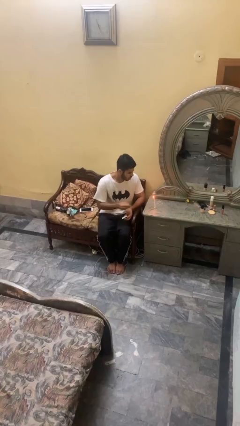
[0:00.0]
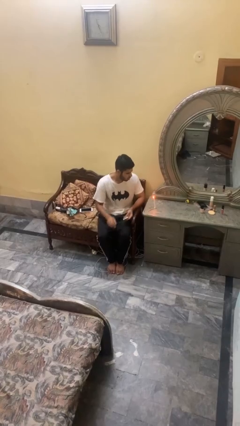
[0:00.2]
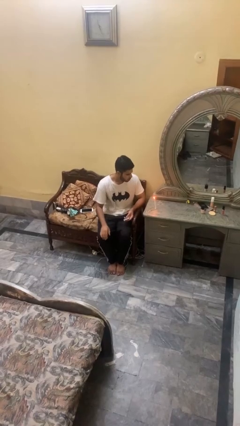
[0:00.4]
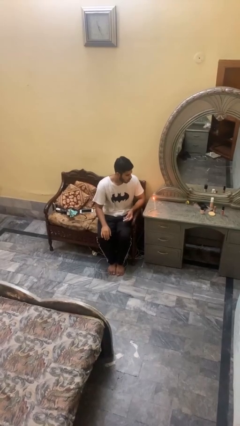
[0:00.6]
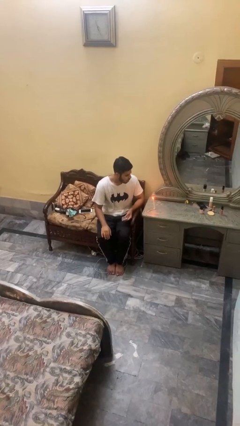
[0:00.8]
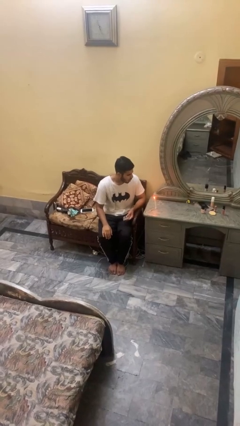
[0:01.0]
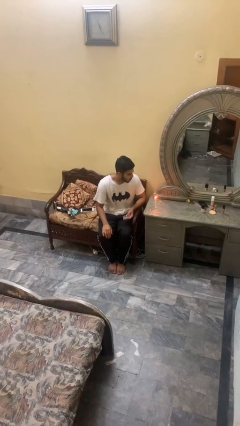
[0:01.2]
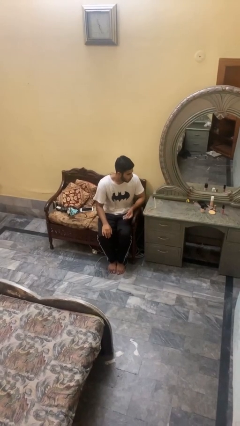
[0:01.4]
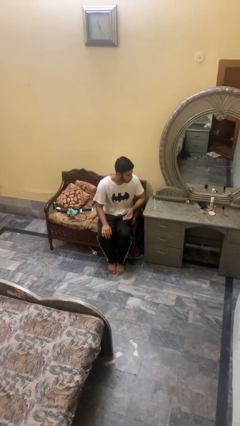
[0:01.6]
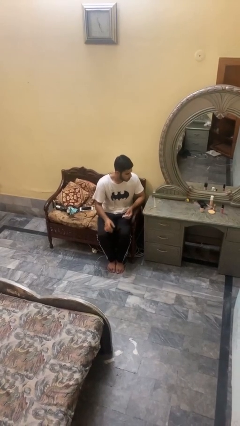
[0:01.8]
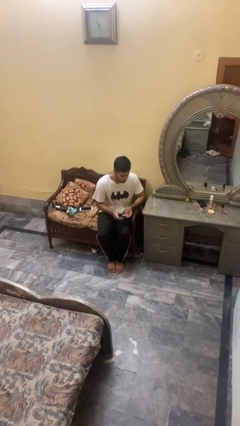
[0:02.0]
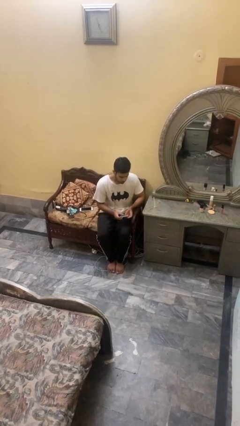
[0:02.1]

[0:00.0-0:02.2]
person extinguishes candle

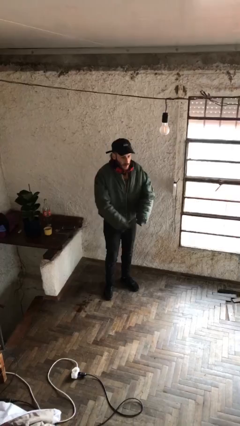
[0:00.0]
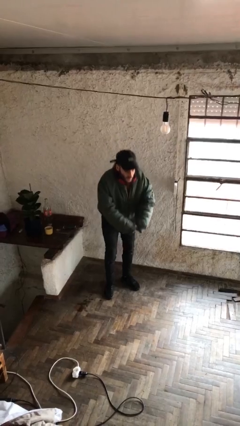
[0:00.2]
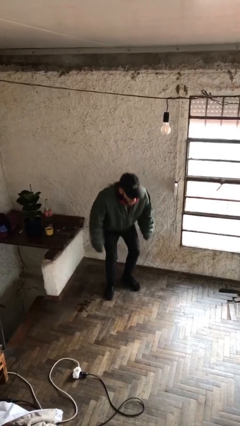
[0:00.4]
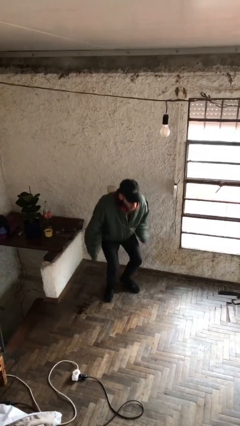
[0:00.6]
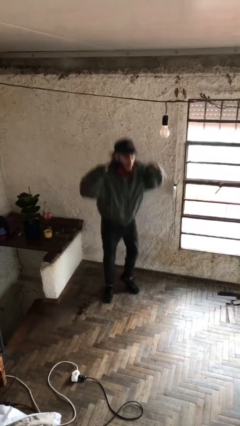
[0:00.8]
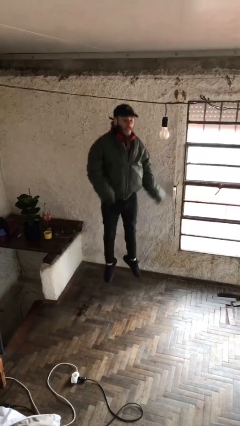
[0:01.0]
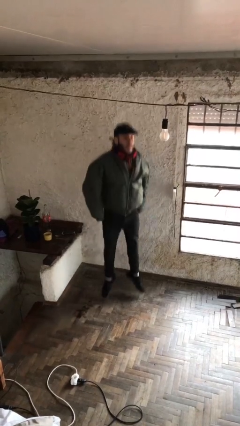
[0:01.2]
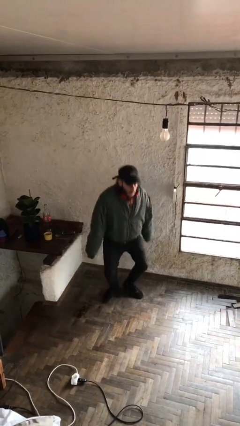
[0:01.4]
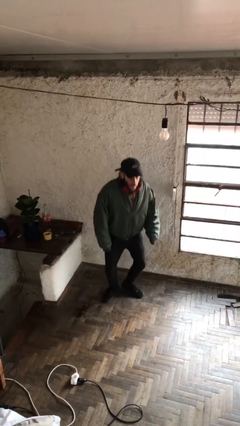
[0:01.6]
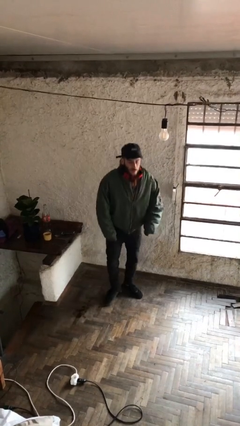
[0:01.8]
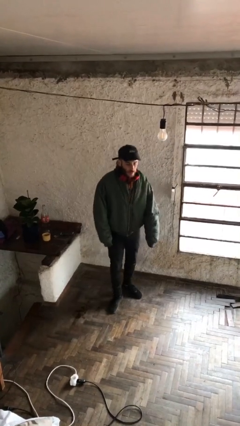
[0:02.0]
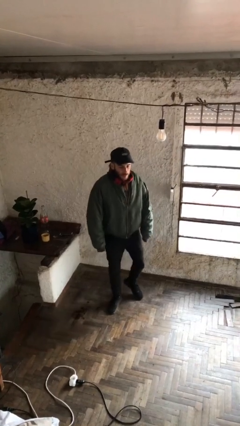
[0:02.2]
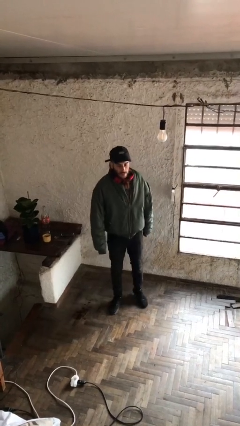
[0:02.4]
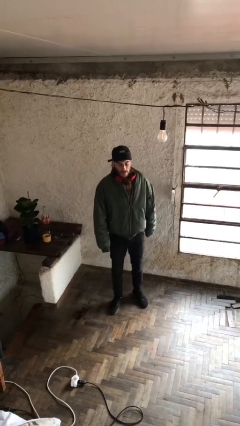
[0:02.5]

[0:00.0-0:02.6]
person jumps

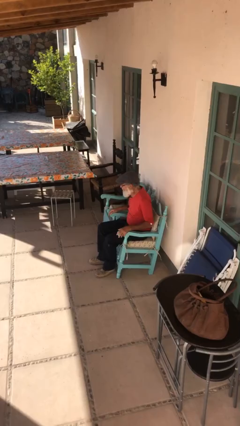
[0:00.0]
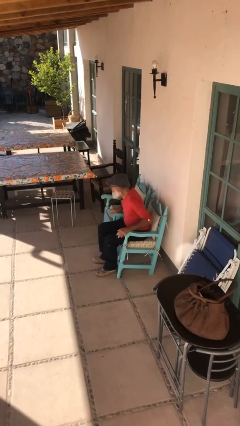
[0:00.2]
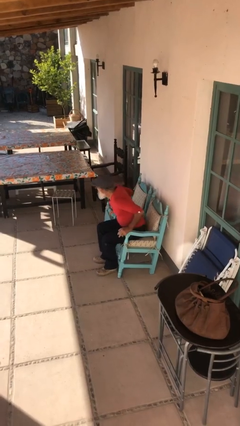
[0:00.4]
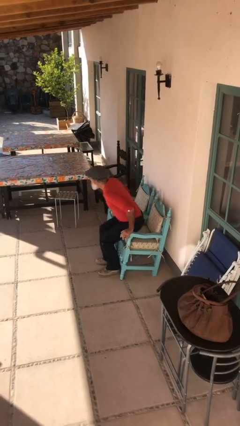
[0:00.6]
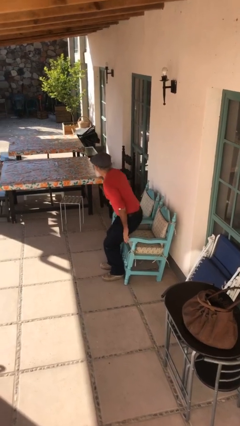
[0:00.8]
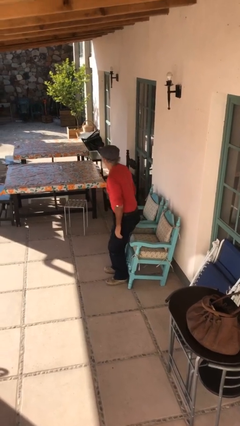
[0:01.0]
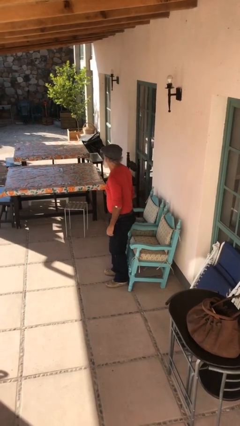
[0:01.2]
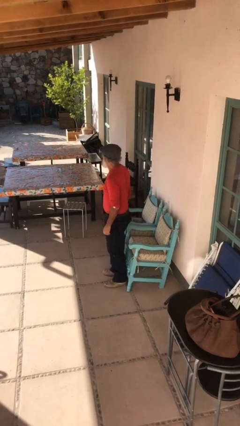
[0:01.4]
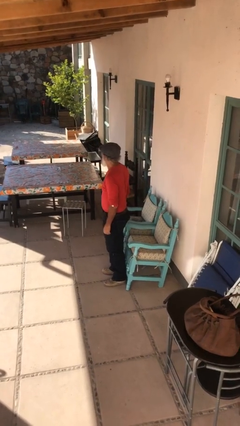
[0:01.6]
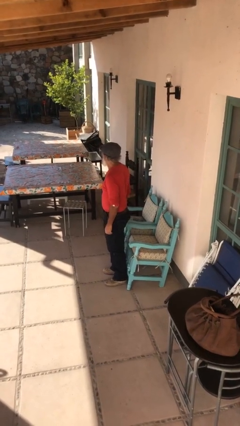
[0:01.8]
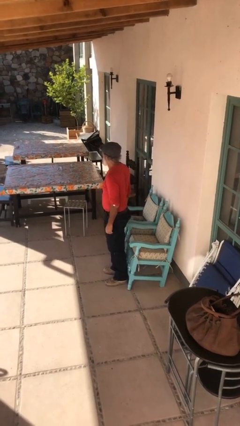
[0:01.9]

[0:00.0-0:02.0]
person stands up

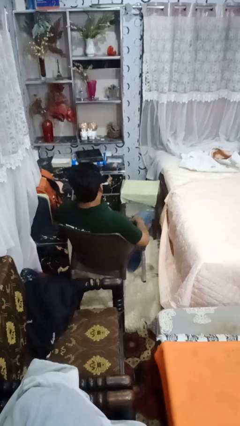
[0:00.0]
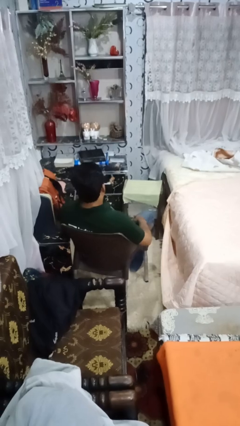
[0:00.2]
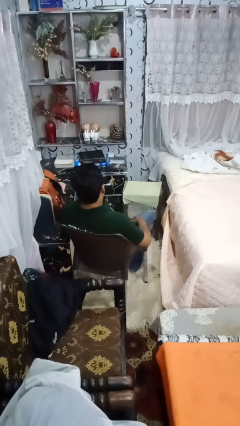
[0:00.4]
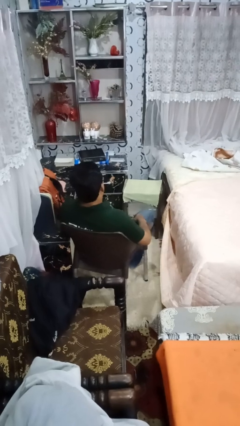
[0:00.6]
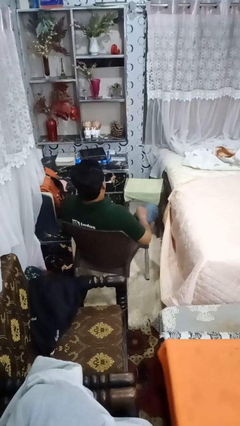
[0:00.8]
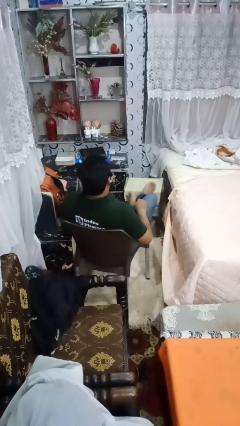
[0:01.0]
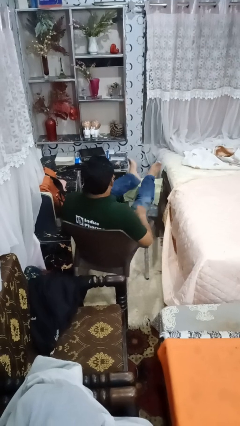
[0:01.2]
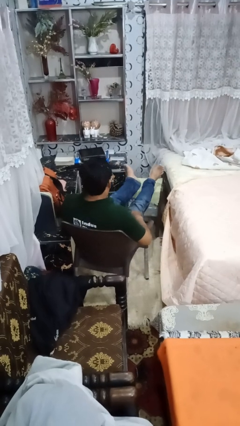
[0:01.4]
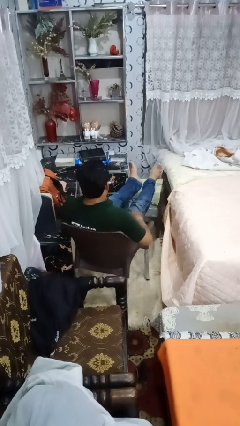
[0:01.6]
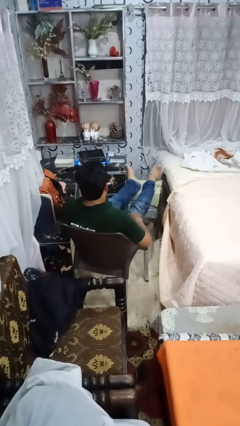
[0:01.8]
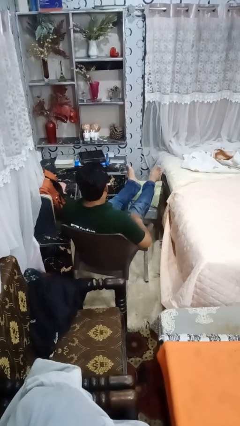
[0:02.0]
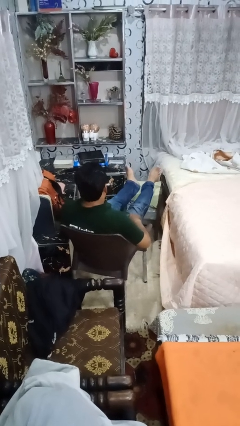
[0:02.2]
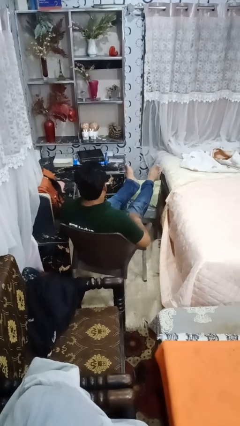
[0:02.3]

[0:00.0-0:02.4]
person puts feet up

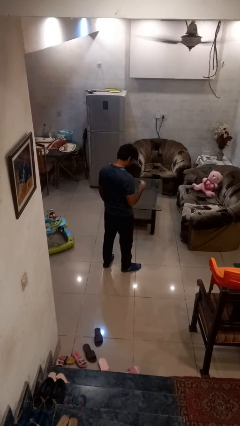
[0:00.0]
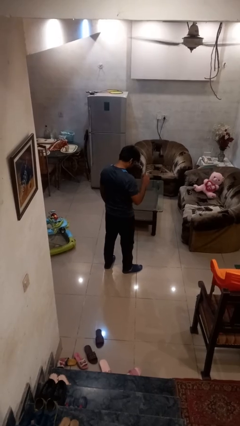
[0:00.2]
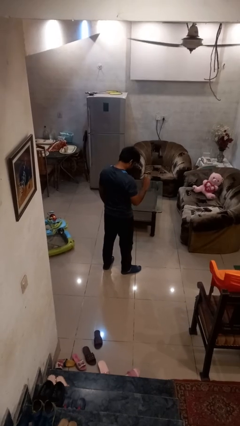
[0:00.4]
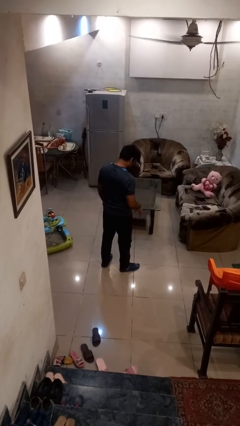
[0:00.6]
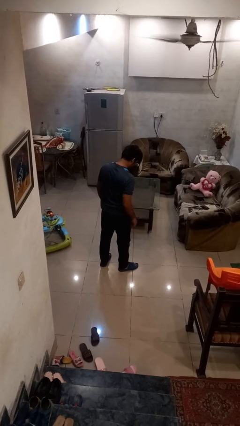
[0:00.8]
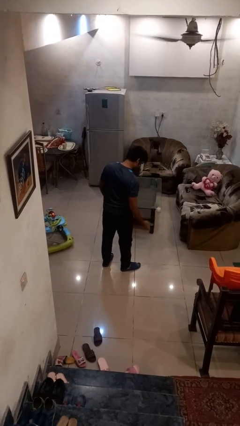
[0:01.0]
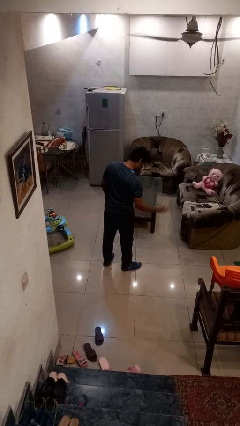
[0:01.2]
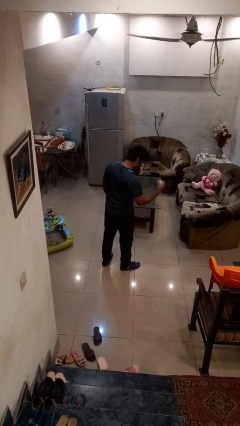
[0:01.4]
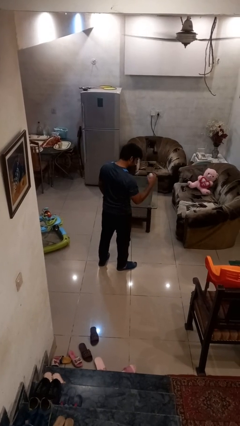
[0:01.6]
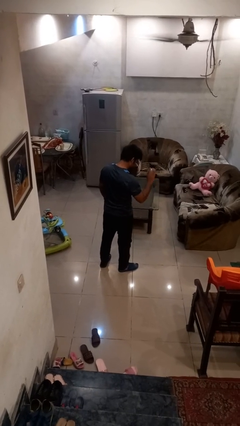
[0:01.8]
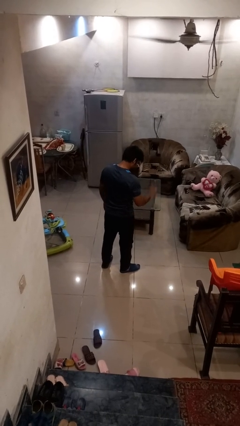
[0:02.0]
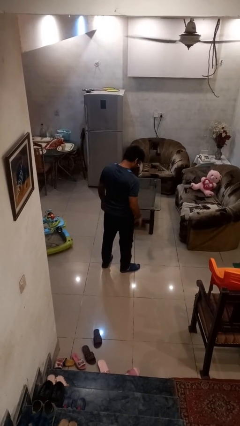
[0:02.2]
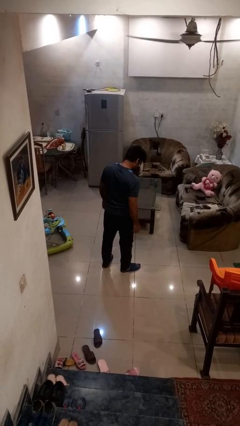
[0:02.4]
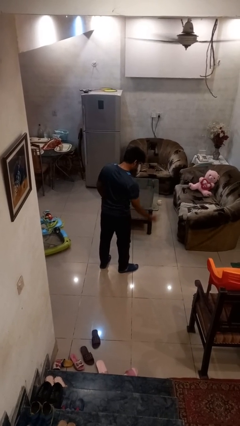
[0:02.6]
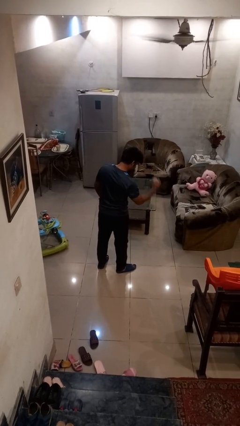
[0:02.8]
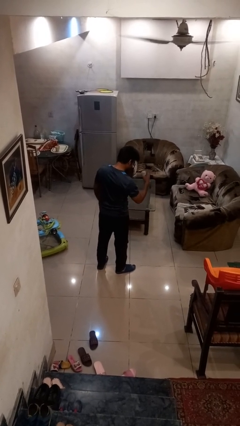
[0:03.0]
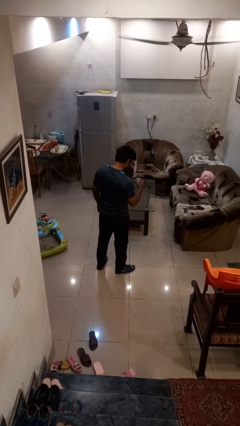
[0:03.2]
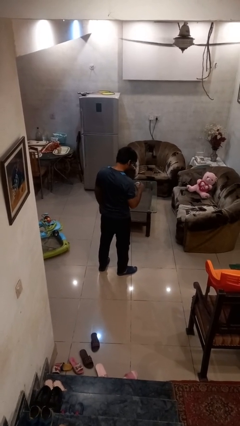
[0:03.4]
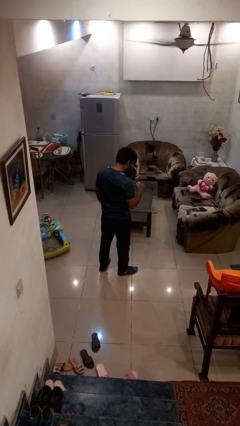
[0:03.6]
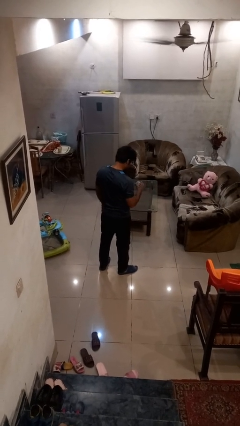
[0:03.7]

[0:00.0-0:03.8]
person bounces ball on floor

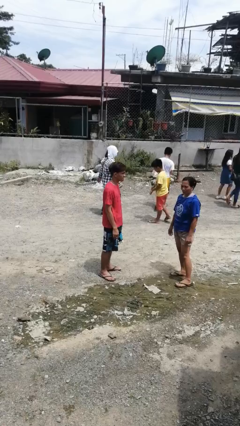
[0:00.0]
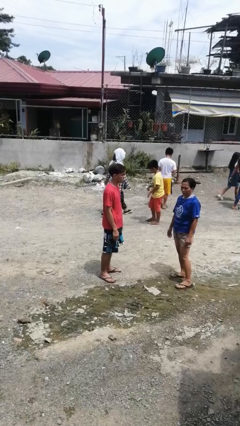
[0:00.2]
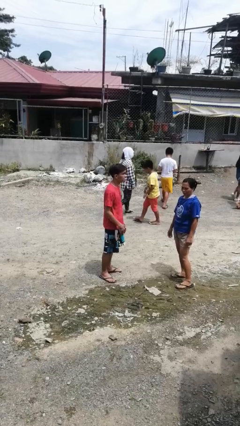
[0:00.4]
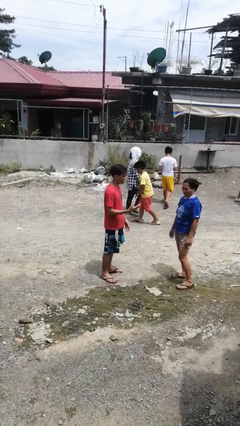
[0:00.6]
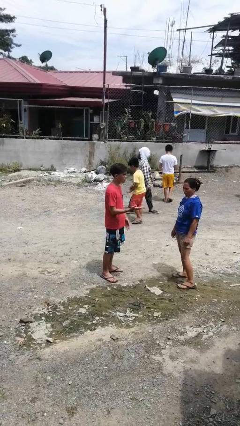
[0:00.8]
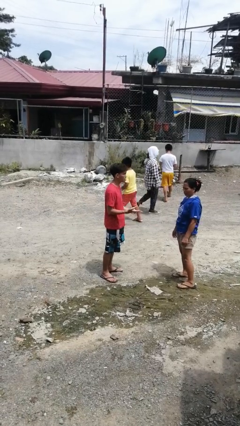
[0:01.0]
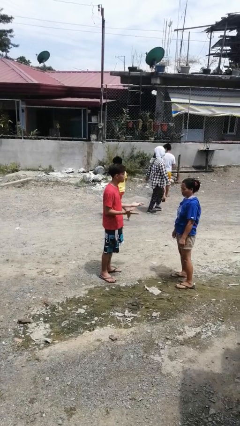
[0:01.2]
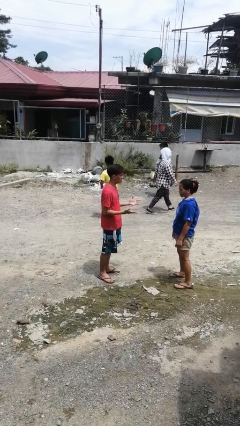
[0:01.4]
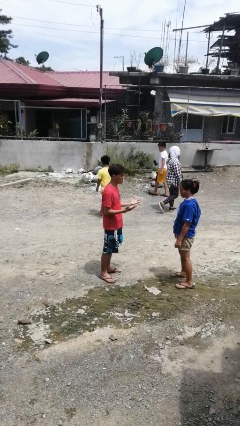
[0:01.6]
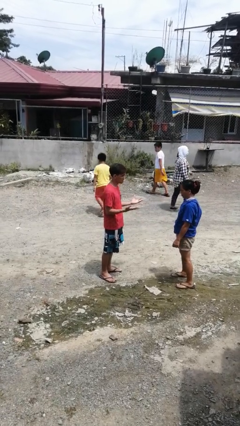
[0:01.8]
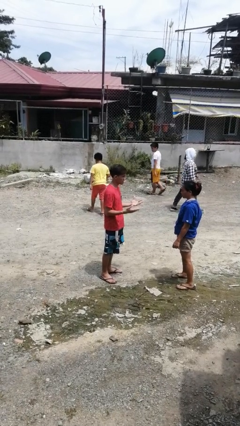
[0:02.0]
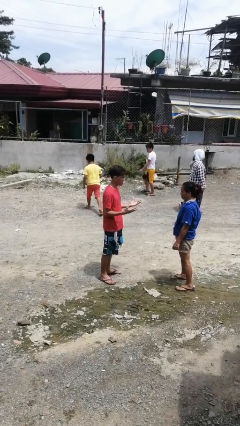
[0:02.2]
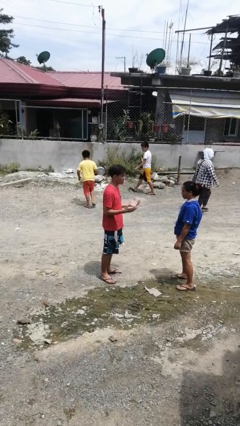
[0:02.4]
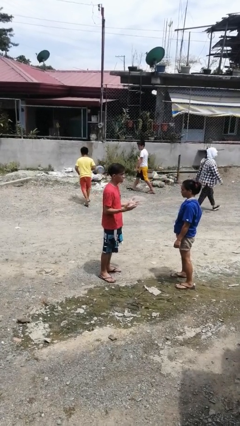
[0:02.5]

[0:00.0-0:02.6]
person talks to person

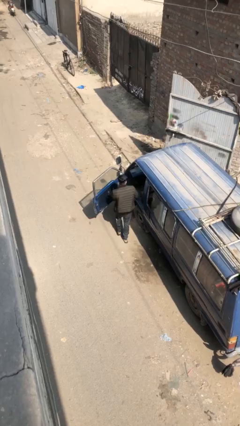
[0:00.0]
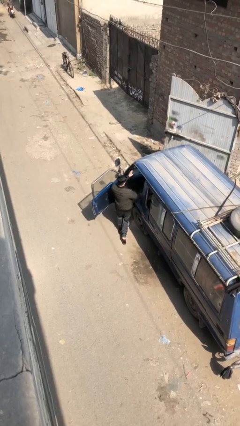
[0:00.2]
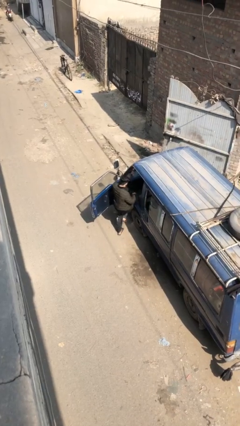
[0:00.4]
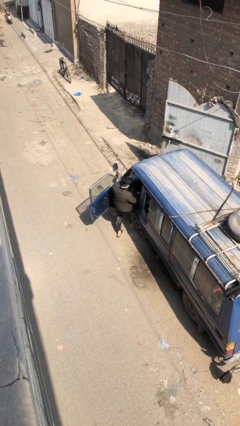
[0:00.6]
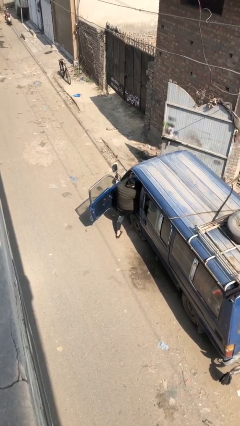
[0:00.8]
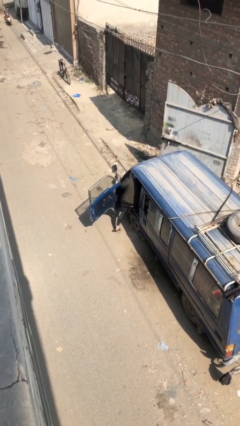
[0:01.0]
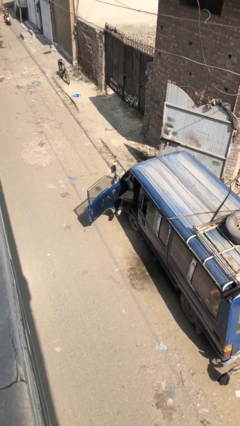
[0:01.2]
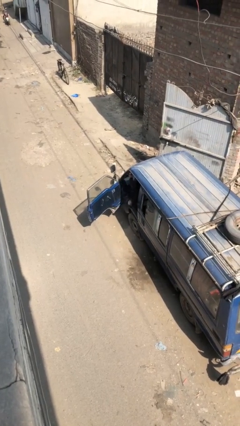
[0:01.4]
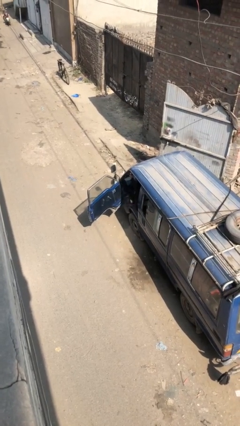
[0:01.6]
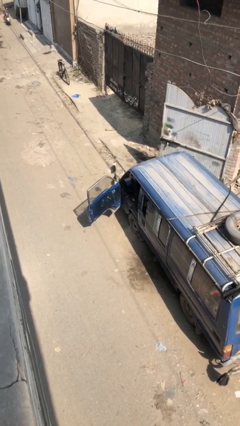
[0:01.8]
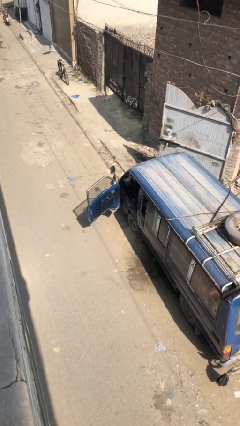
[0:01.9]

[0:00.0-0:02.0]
person enters car
